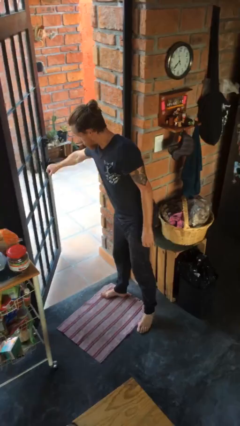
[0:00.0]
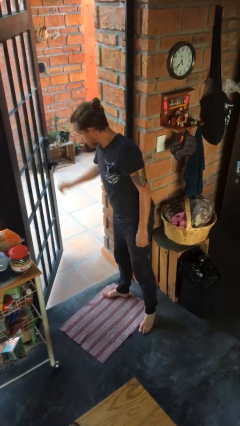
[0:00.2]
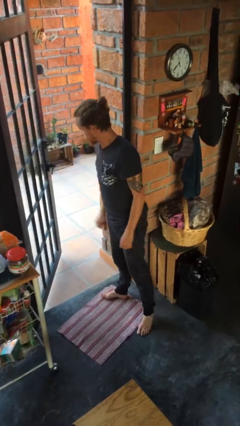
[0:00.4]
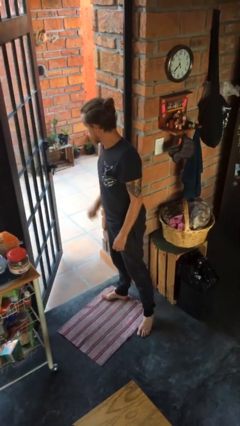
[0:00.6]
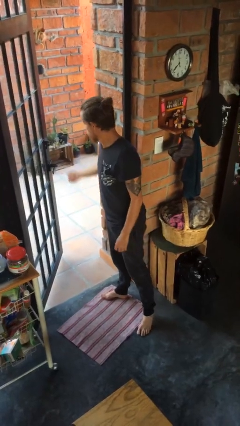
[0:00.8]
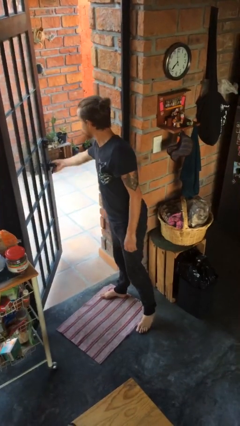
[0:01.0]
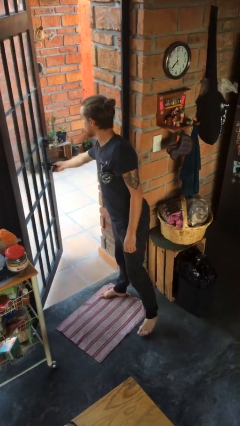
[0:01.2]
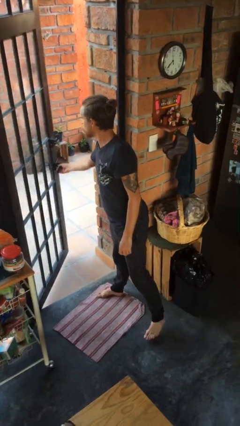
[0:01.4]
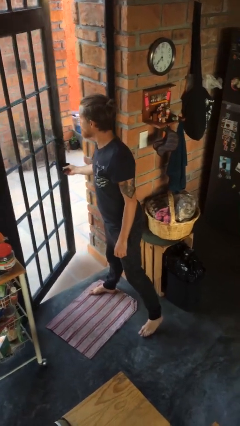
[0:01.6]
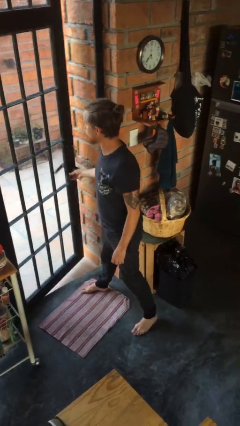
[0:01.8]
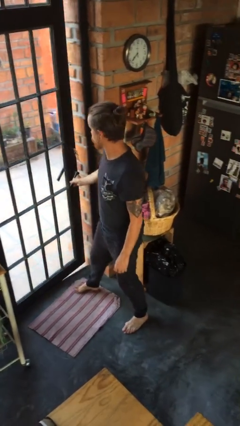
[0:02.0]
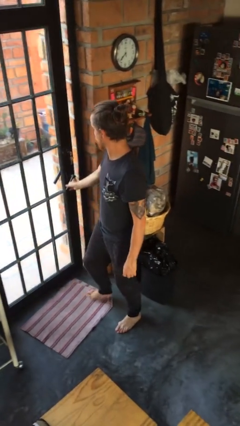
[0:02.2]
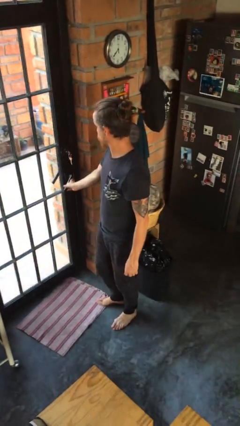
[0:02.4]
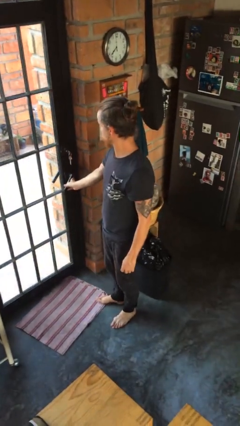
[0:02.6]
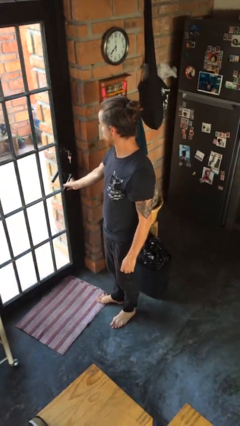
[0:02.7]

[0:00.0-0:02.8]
person closes facility door

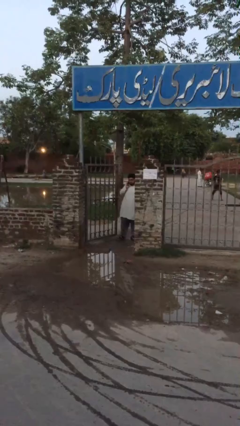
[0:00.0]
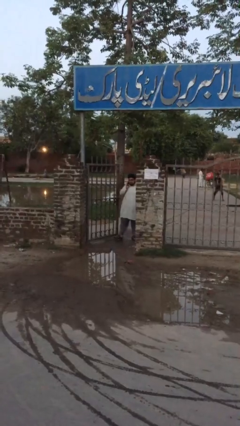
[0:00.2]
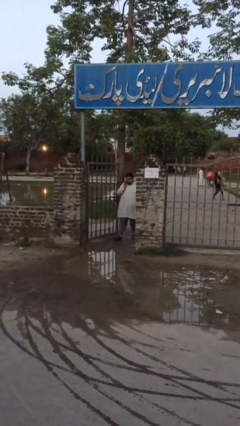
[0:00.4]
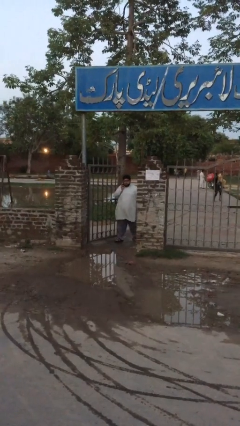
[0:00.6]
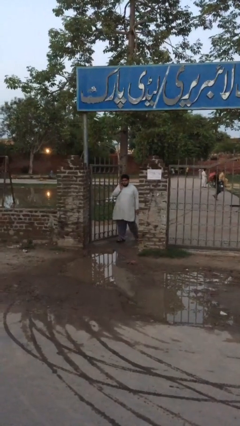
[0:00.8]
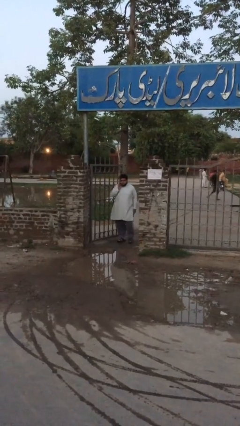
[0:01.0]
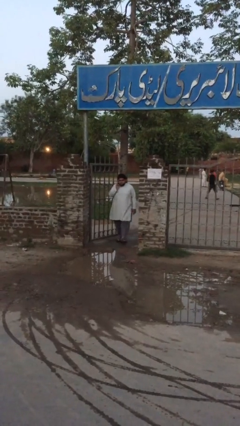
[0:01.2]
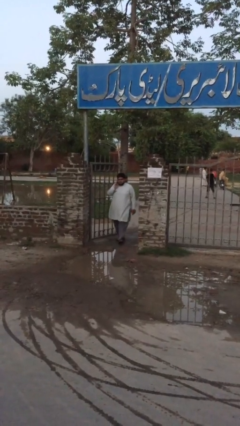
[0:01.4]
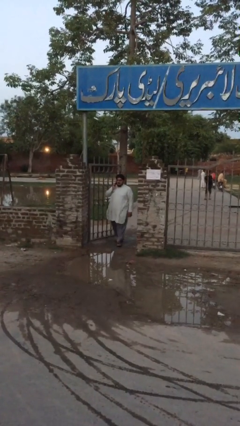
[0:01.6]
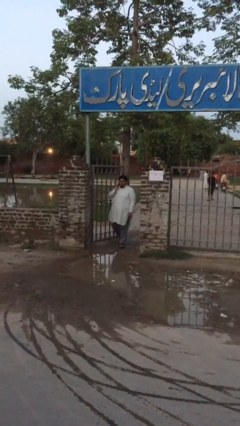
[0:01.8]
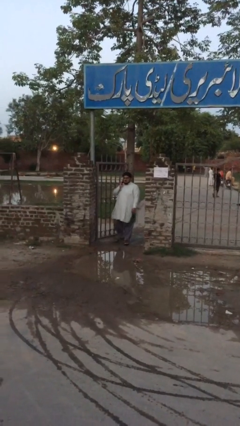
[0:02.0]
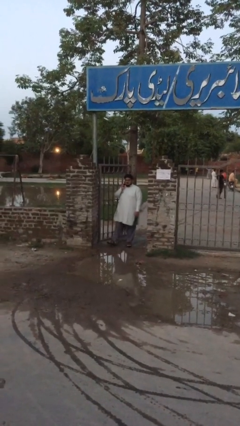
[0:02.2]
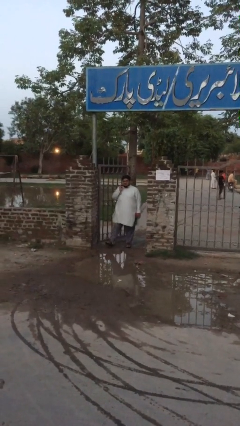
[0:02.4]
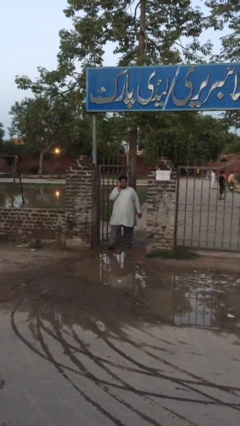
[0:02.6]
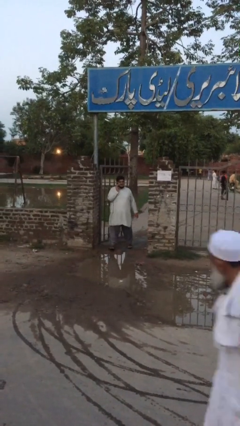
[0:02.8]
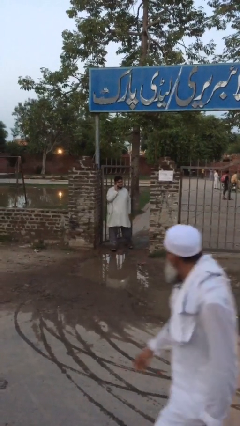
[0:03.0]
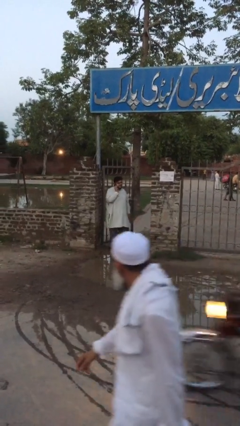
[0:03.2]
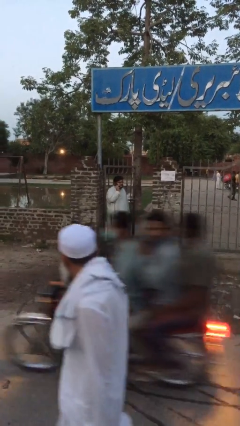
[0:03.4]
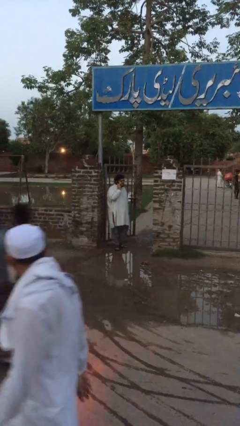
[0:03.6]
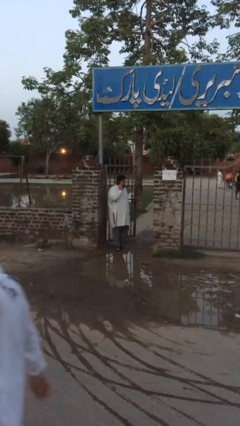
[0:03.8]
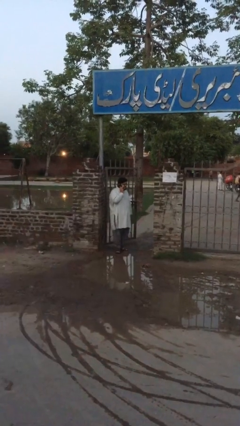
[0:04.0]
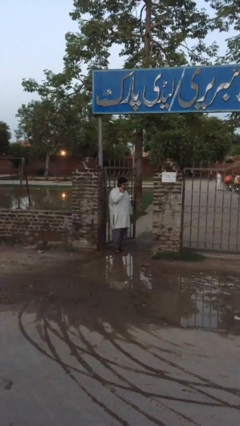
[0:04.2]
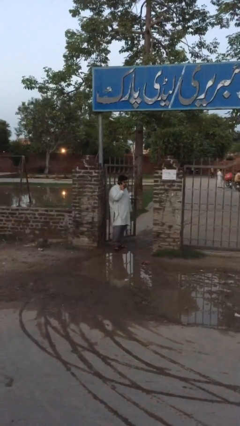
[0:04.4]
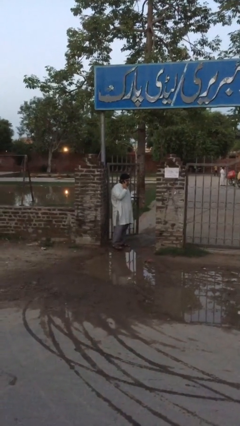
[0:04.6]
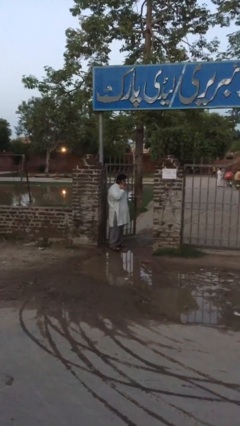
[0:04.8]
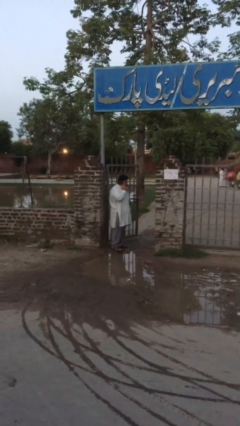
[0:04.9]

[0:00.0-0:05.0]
person enters scene through structure

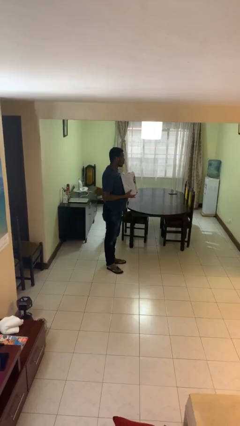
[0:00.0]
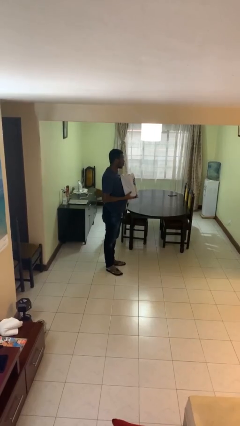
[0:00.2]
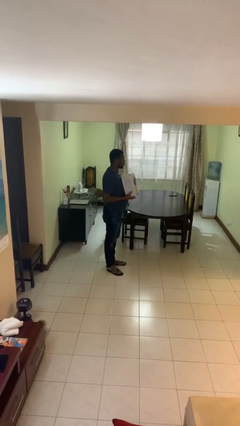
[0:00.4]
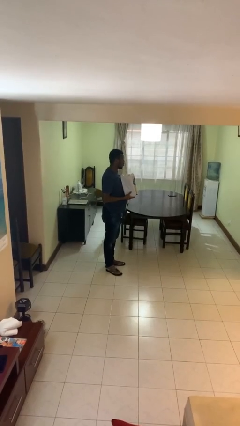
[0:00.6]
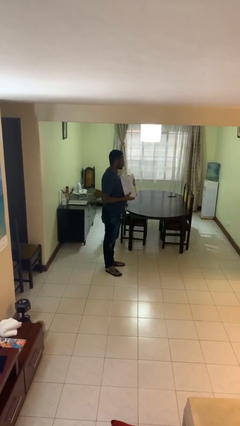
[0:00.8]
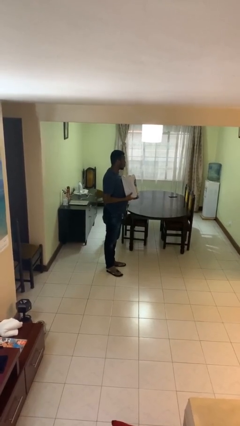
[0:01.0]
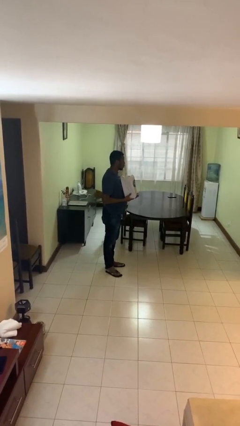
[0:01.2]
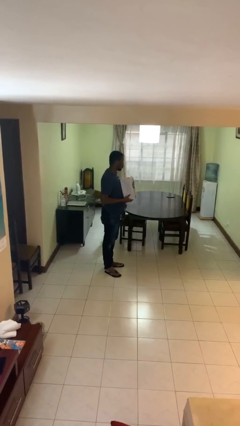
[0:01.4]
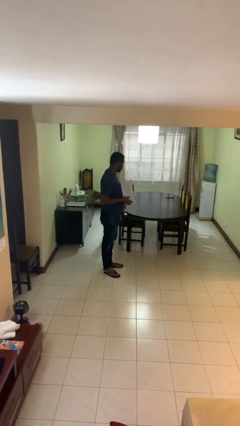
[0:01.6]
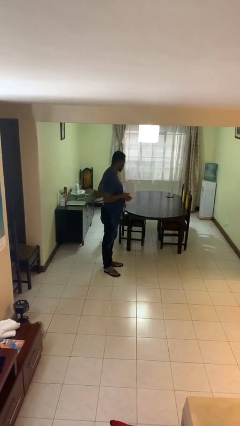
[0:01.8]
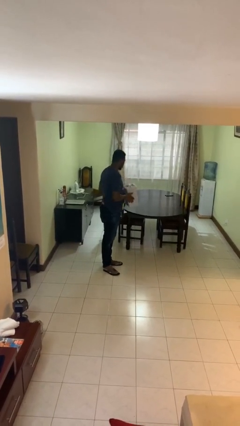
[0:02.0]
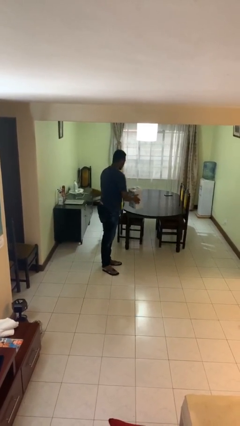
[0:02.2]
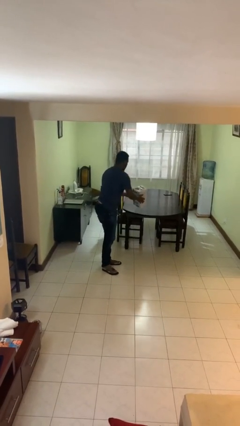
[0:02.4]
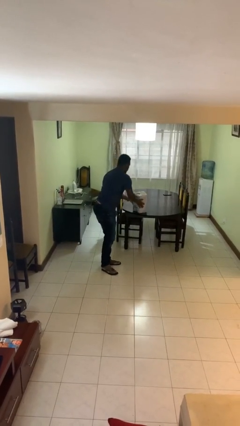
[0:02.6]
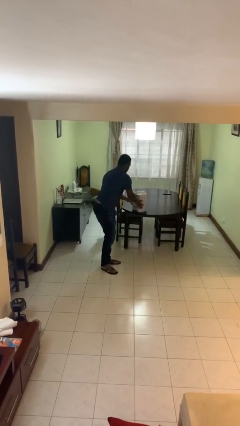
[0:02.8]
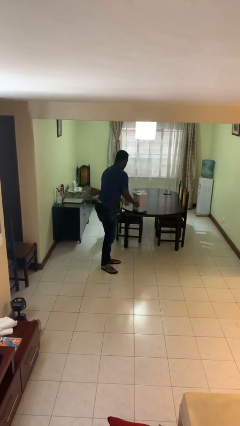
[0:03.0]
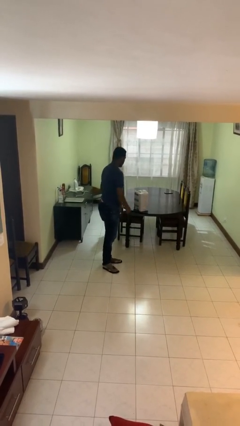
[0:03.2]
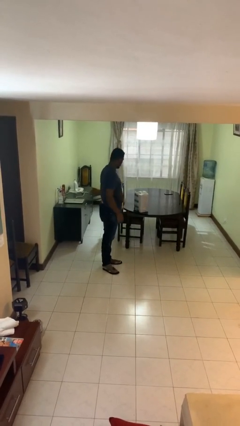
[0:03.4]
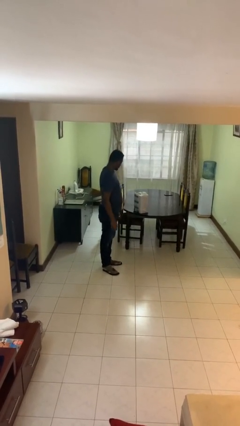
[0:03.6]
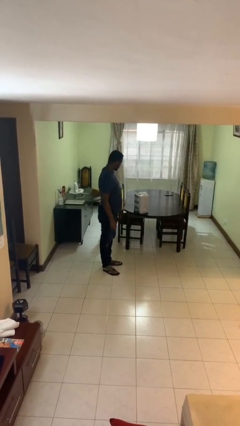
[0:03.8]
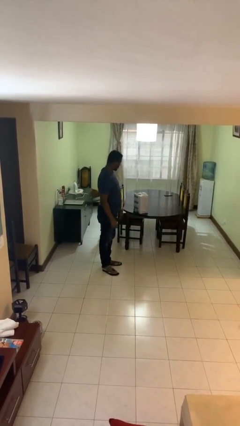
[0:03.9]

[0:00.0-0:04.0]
person puts down object on table

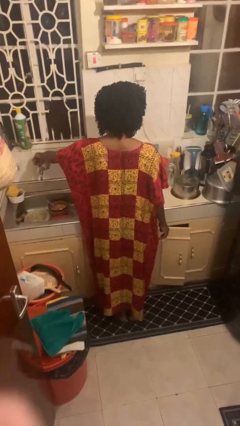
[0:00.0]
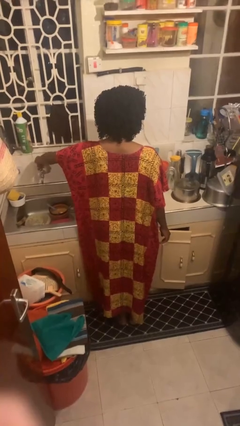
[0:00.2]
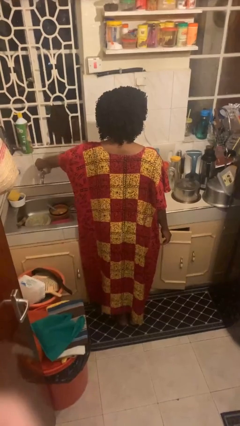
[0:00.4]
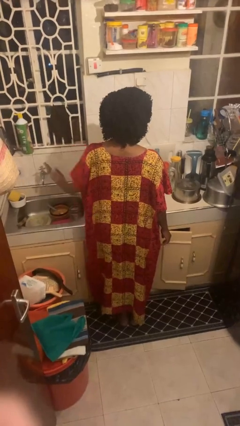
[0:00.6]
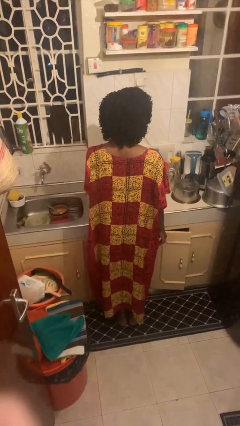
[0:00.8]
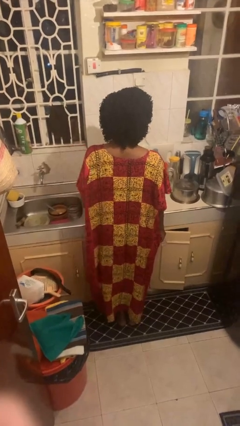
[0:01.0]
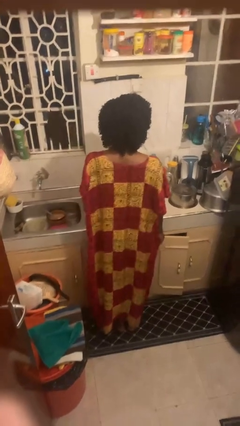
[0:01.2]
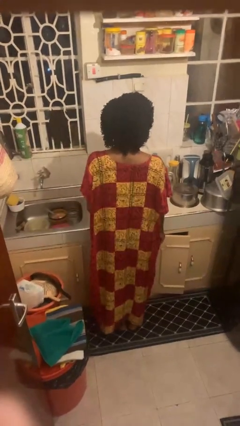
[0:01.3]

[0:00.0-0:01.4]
person turns off faucet

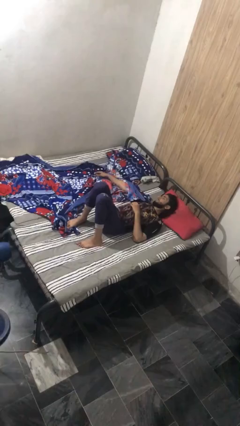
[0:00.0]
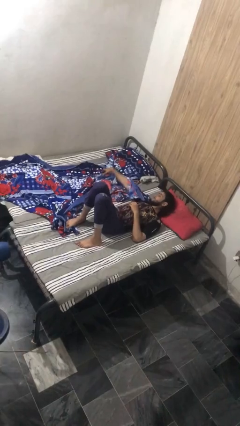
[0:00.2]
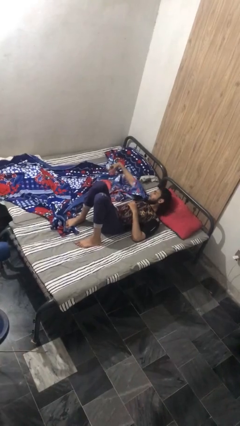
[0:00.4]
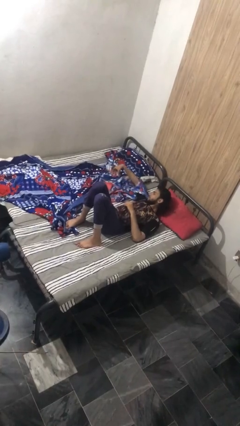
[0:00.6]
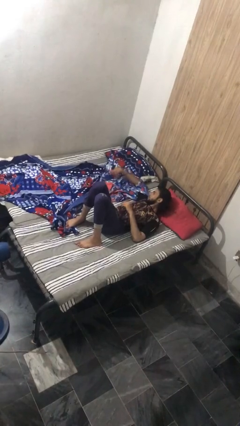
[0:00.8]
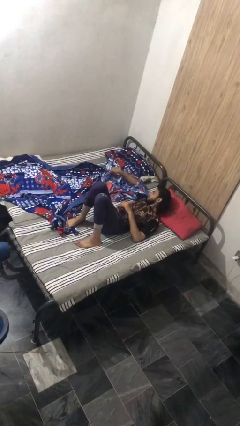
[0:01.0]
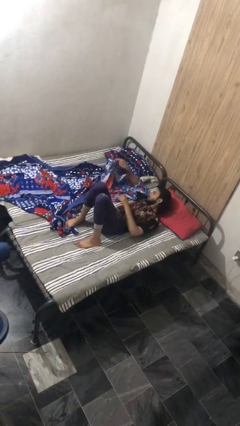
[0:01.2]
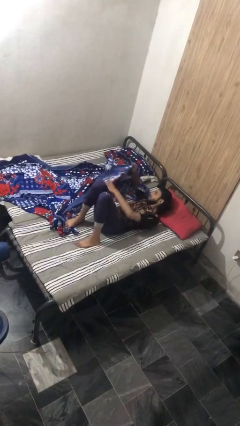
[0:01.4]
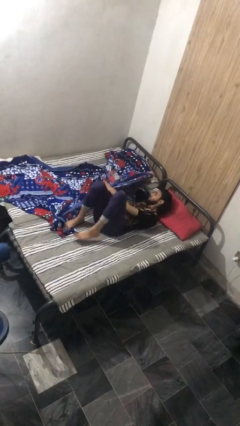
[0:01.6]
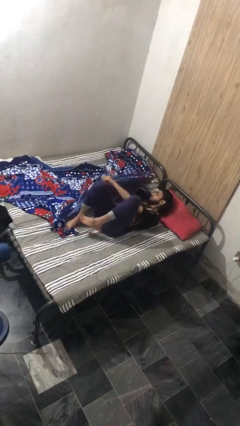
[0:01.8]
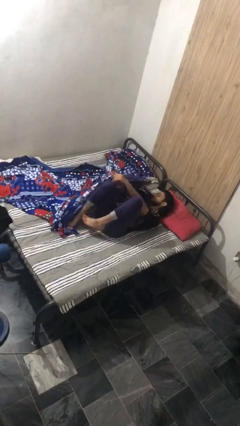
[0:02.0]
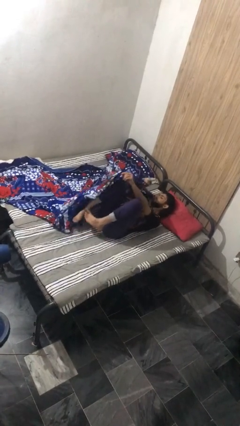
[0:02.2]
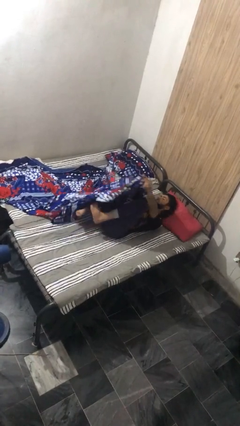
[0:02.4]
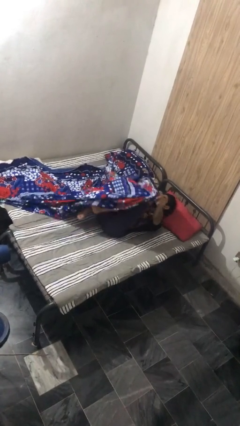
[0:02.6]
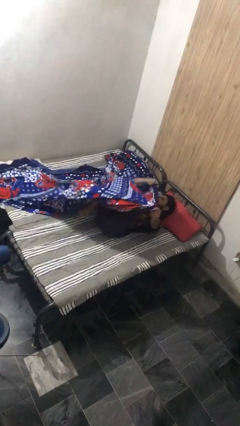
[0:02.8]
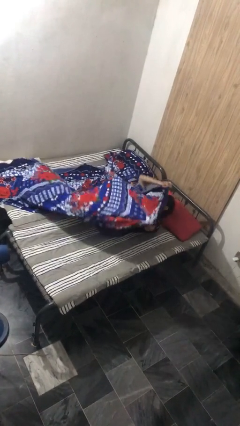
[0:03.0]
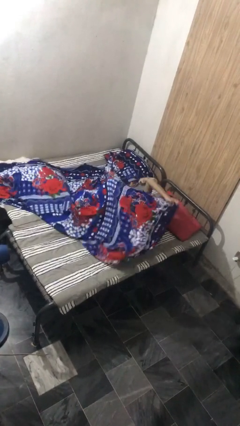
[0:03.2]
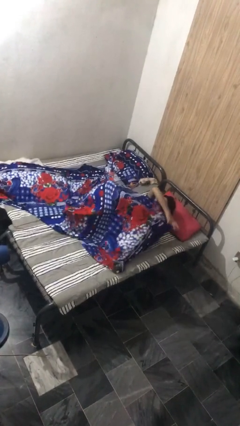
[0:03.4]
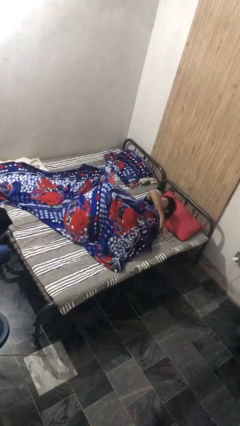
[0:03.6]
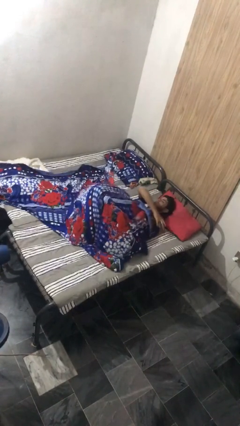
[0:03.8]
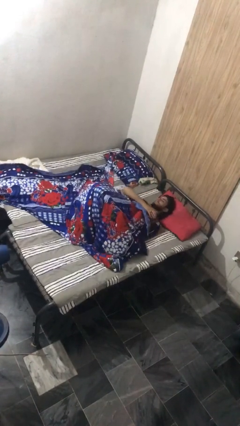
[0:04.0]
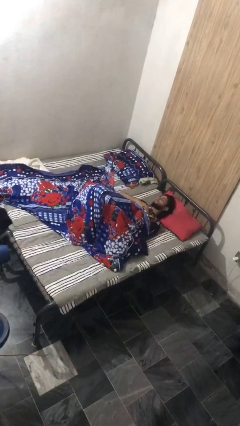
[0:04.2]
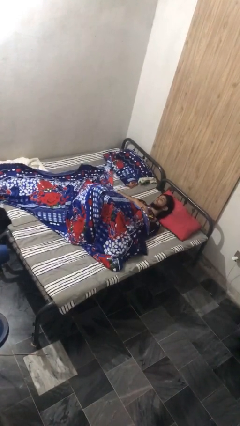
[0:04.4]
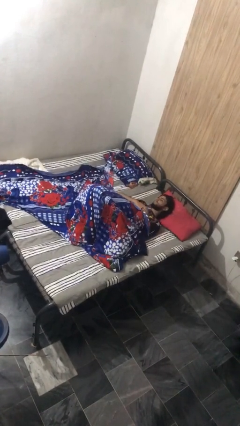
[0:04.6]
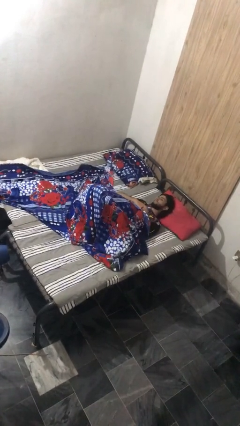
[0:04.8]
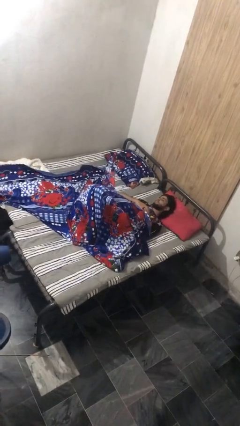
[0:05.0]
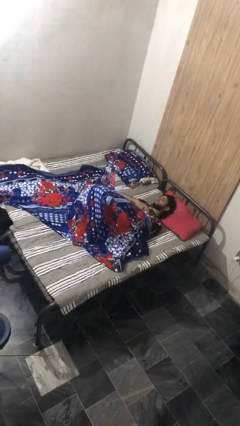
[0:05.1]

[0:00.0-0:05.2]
person covers with bedsheets
